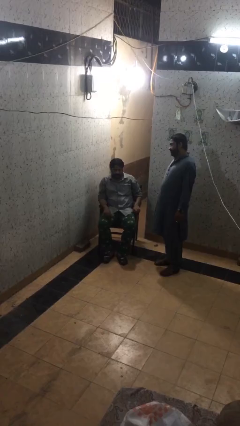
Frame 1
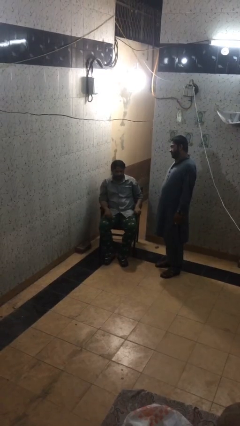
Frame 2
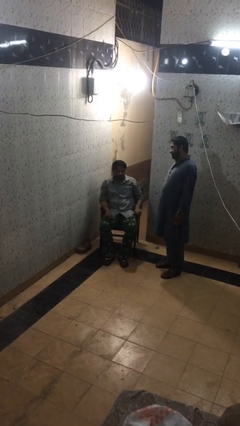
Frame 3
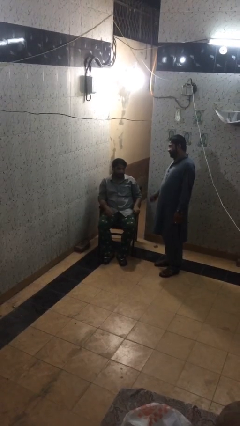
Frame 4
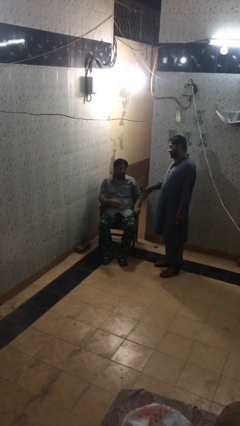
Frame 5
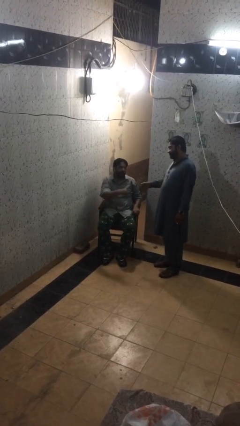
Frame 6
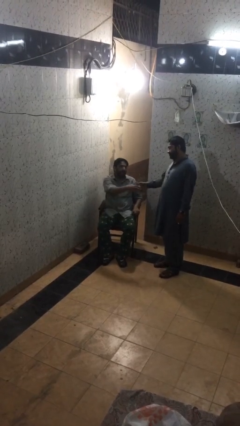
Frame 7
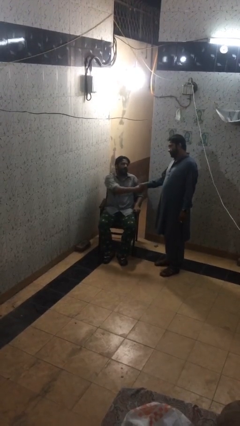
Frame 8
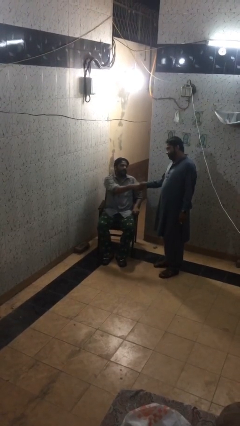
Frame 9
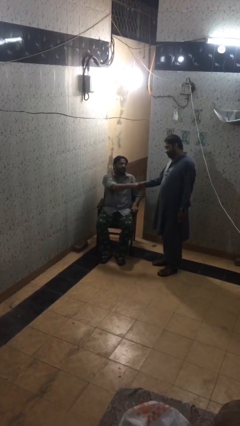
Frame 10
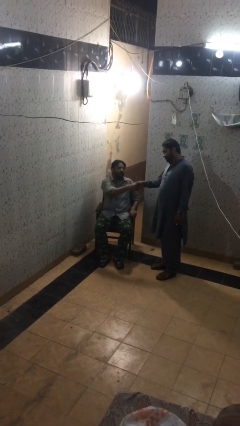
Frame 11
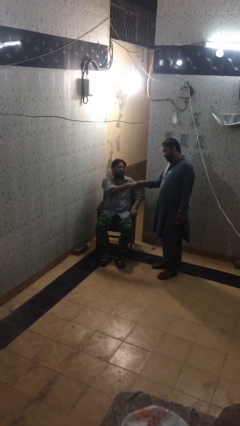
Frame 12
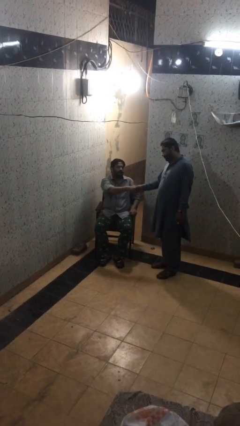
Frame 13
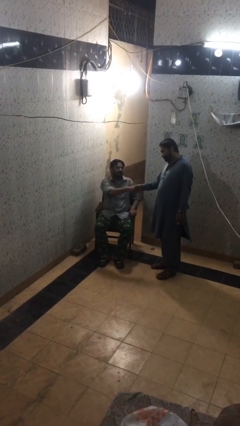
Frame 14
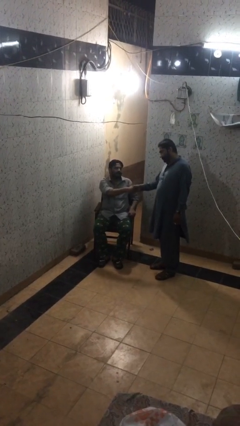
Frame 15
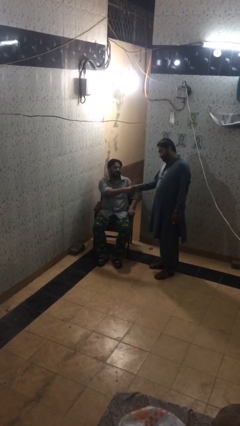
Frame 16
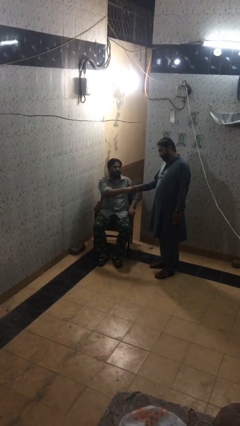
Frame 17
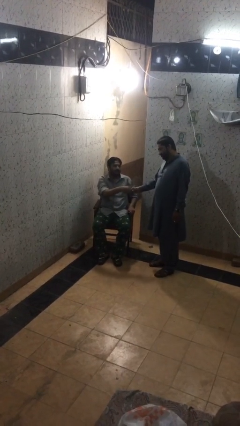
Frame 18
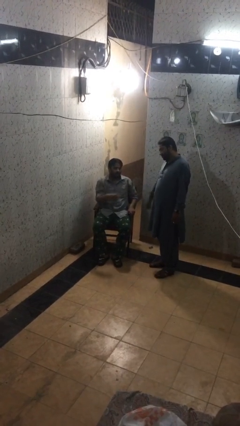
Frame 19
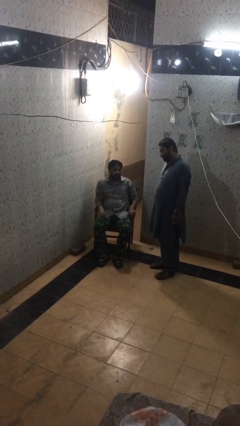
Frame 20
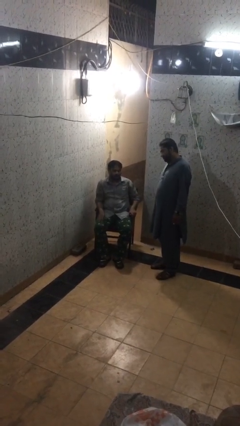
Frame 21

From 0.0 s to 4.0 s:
person shakes hand

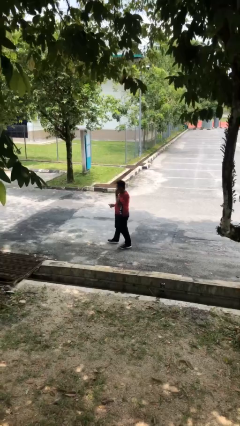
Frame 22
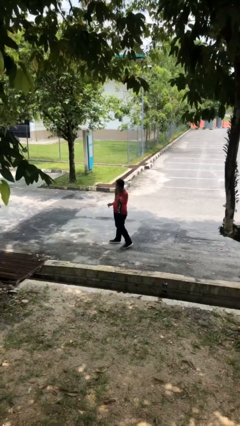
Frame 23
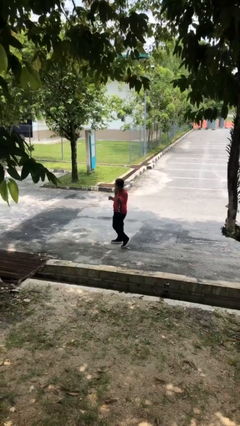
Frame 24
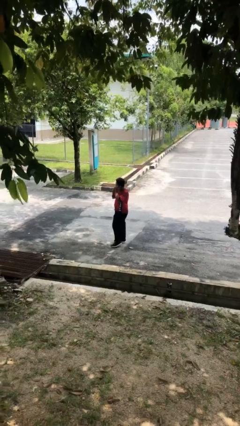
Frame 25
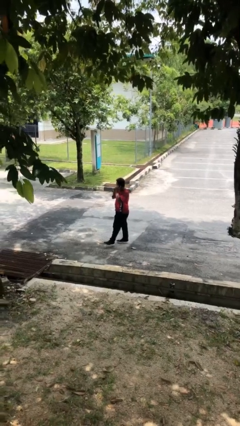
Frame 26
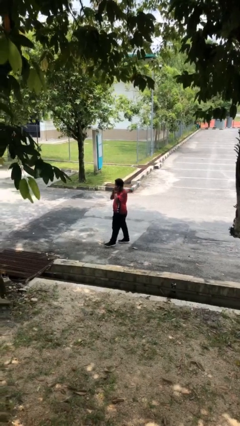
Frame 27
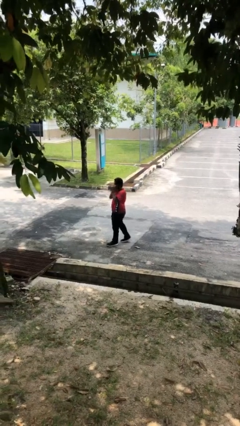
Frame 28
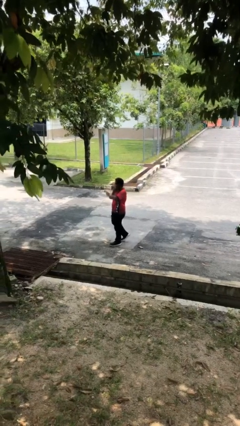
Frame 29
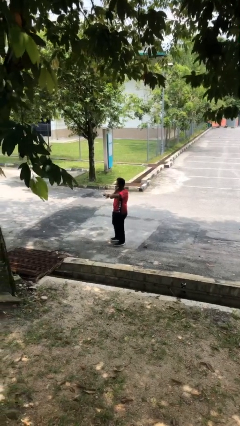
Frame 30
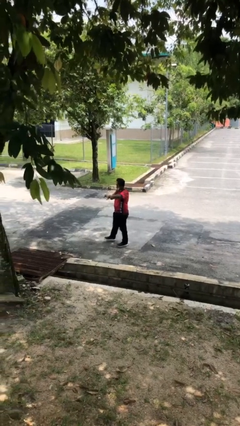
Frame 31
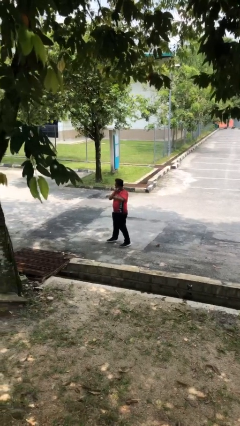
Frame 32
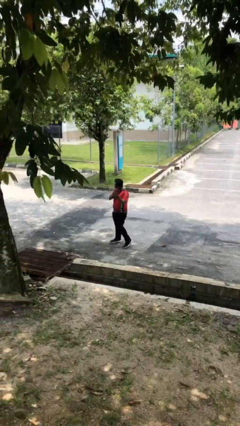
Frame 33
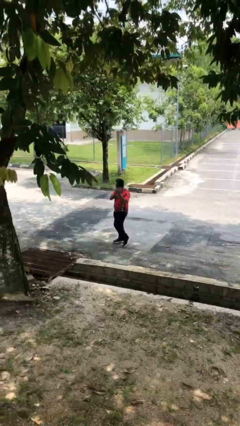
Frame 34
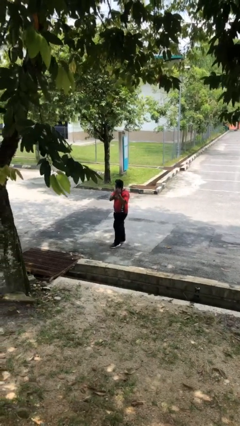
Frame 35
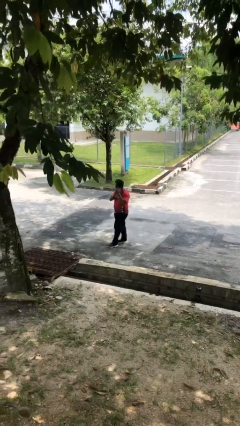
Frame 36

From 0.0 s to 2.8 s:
person talks on phone

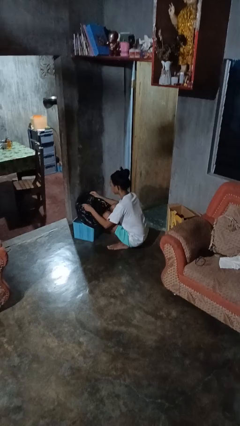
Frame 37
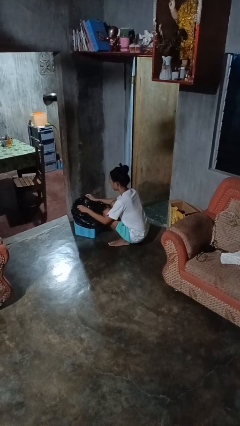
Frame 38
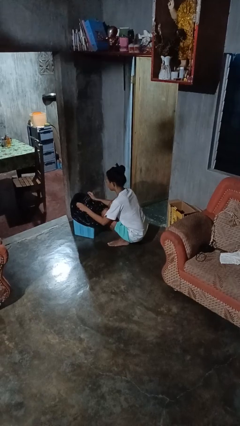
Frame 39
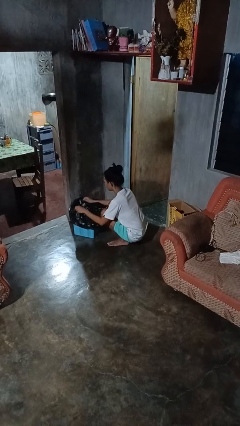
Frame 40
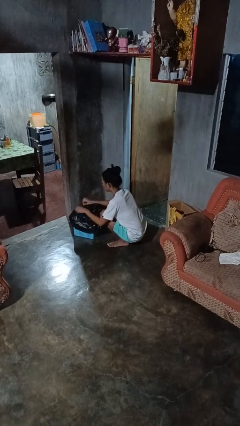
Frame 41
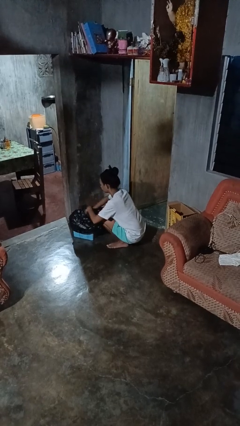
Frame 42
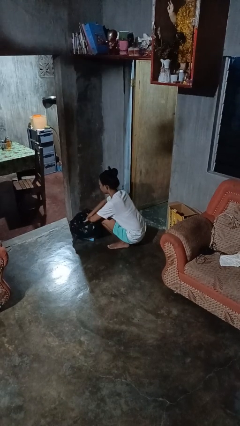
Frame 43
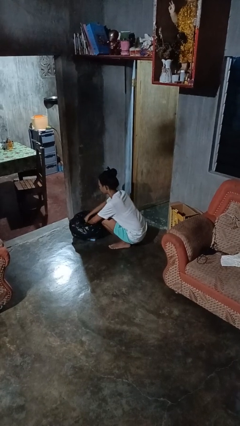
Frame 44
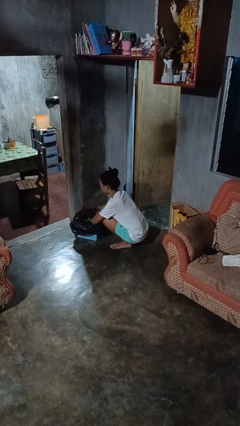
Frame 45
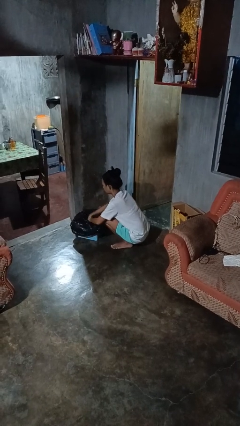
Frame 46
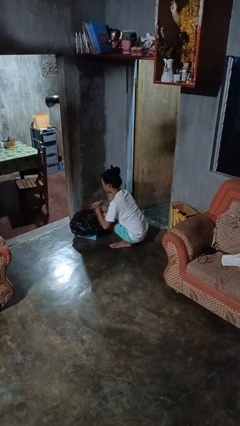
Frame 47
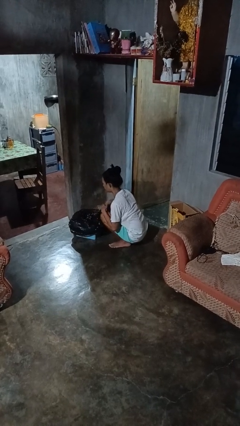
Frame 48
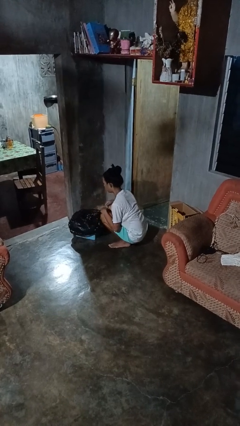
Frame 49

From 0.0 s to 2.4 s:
person inserts trashbag into trashcan

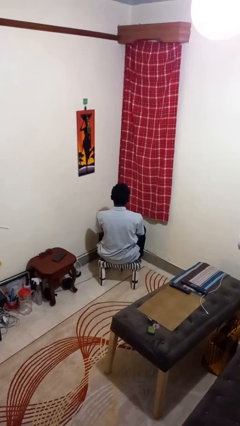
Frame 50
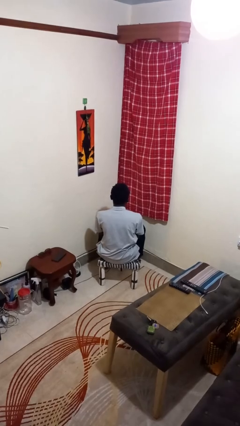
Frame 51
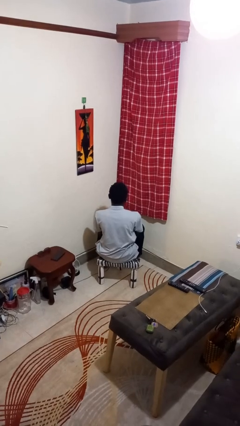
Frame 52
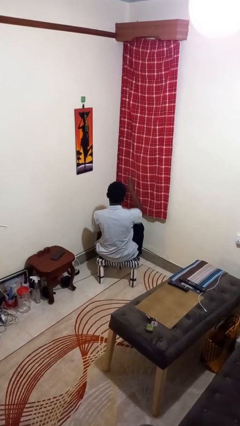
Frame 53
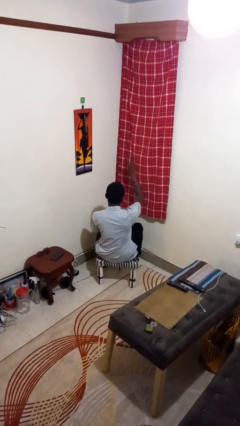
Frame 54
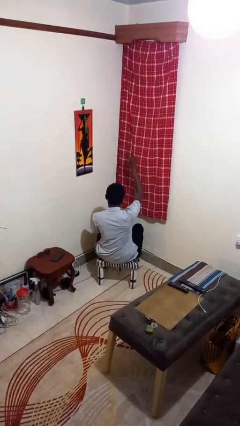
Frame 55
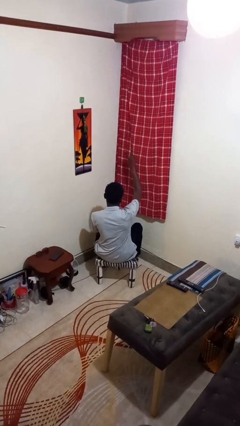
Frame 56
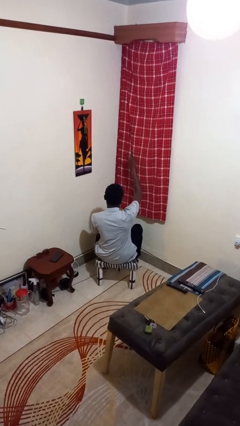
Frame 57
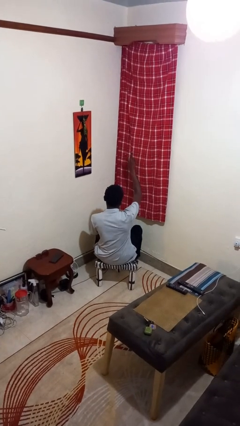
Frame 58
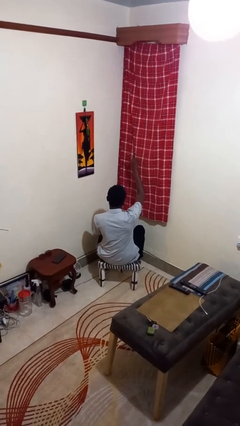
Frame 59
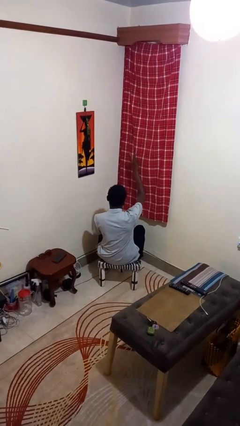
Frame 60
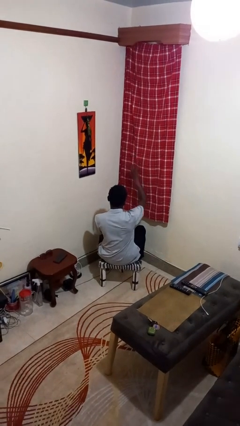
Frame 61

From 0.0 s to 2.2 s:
person gestures peace

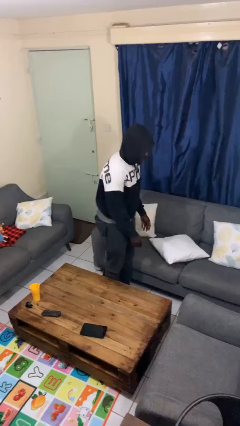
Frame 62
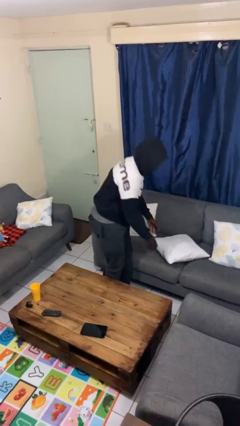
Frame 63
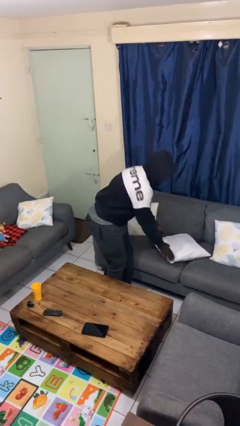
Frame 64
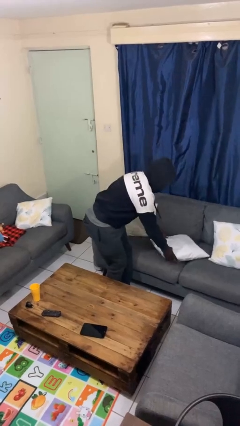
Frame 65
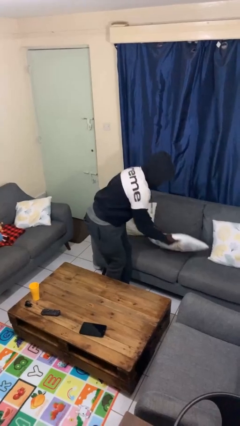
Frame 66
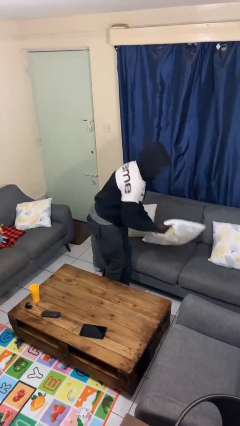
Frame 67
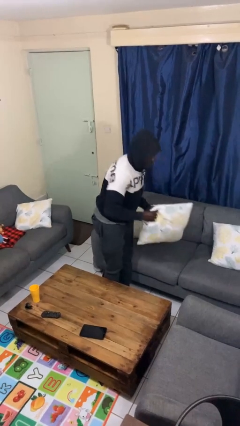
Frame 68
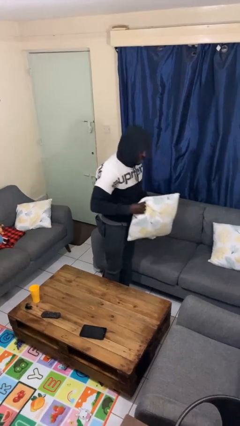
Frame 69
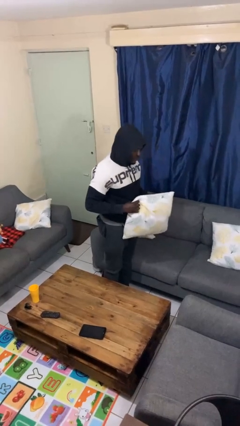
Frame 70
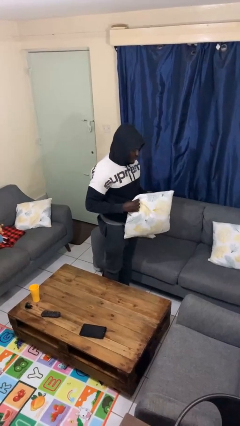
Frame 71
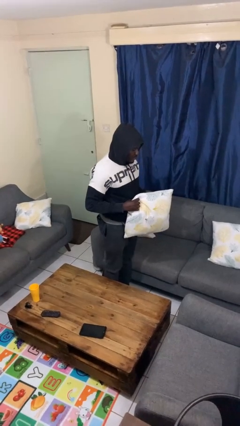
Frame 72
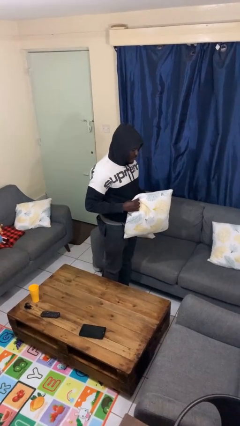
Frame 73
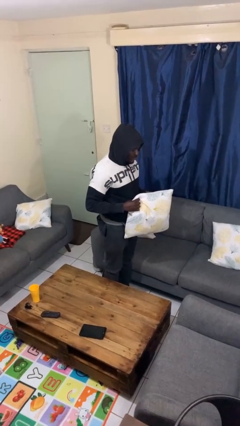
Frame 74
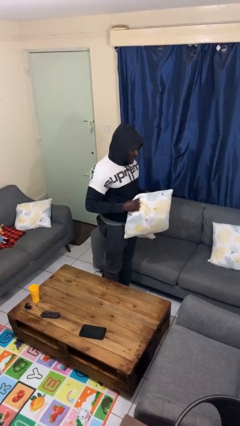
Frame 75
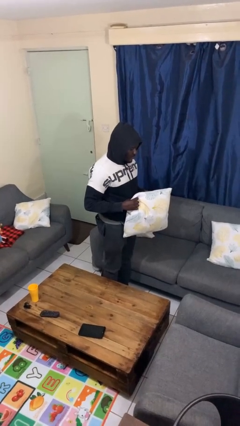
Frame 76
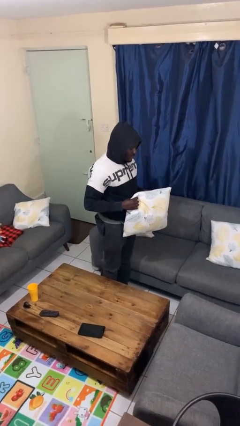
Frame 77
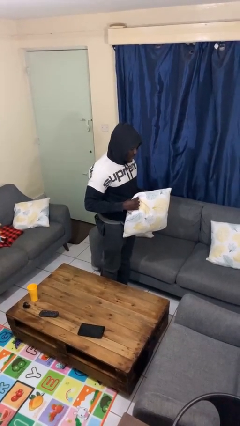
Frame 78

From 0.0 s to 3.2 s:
person picks up object from couch

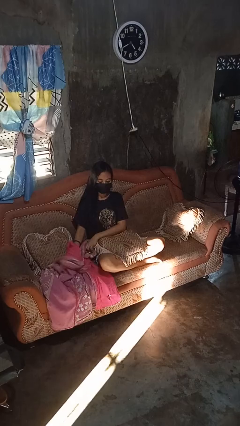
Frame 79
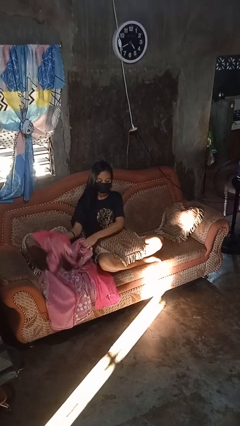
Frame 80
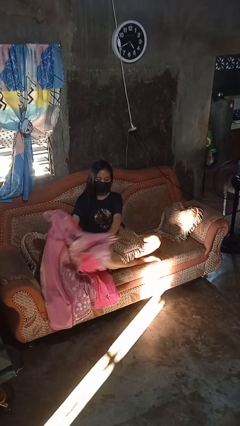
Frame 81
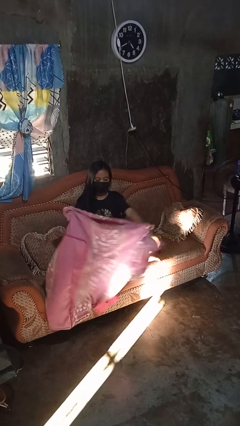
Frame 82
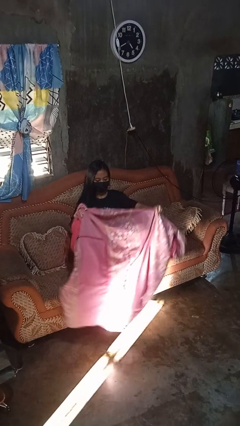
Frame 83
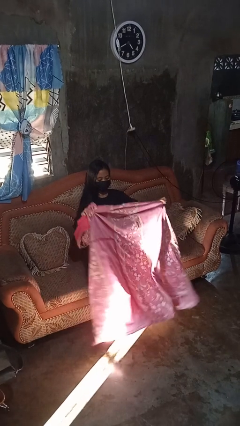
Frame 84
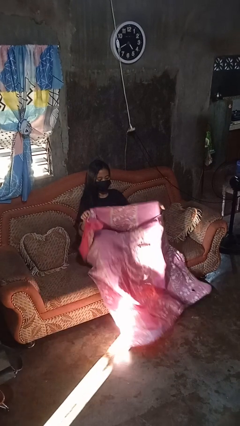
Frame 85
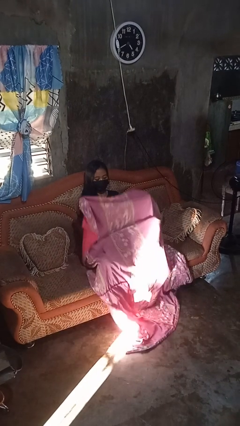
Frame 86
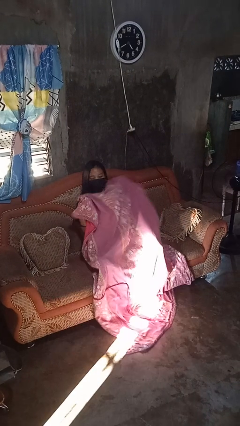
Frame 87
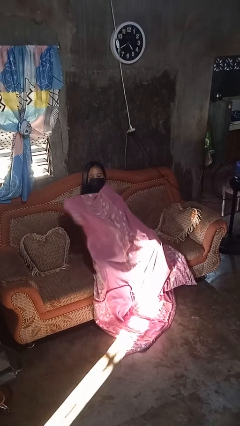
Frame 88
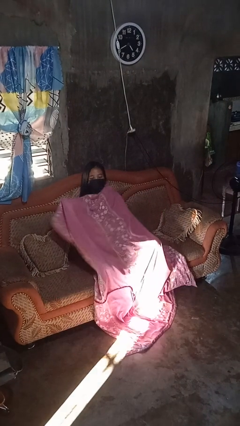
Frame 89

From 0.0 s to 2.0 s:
person covers with blanket

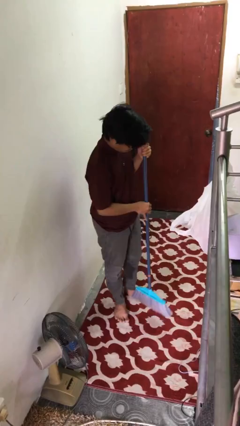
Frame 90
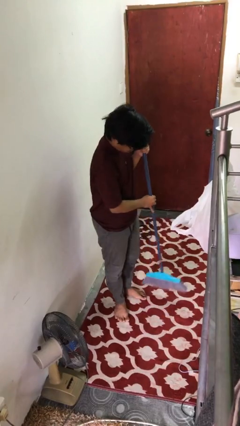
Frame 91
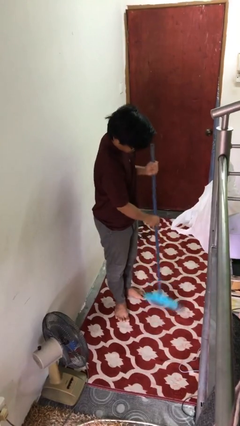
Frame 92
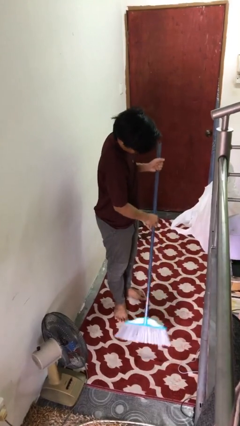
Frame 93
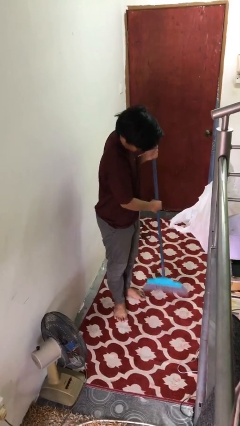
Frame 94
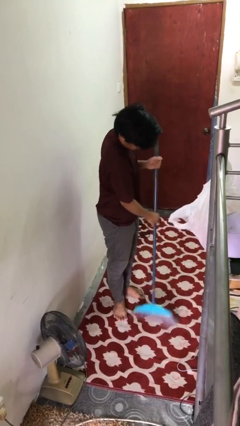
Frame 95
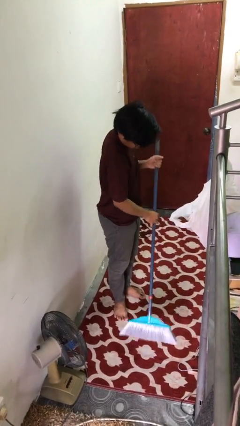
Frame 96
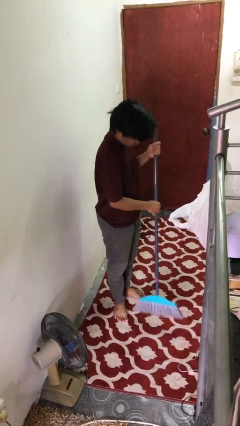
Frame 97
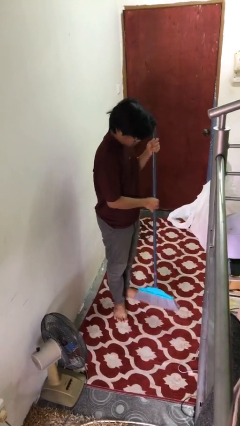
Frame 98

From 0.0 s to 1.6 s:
person sweeps floor
